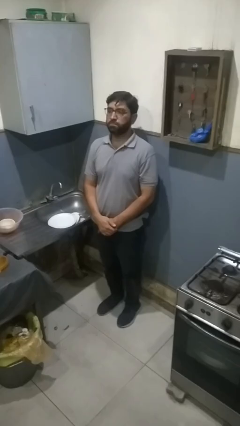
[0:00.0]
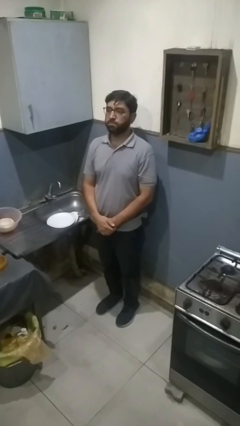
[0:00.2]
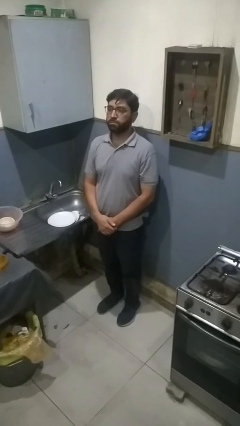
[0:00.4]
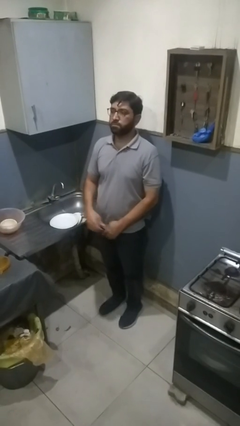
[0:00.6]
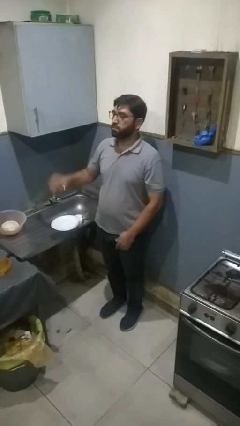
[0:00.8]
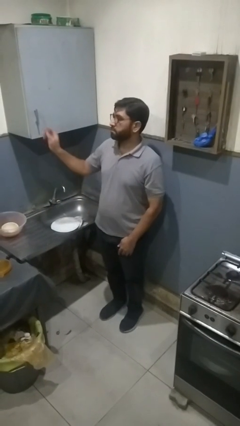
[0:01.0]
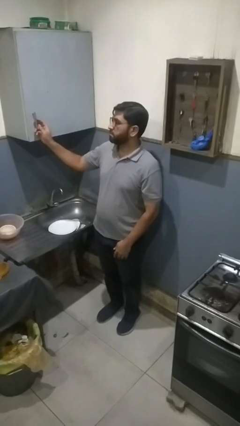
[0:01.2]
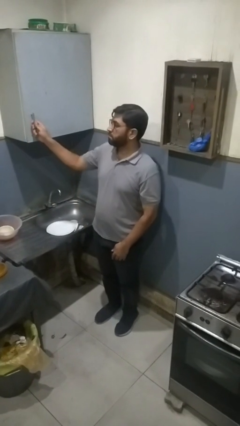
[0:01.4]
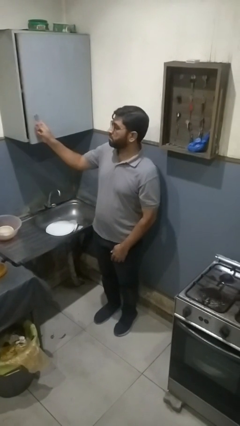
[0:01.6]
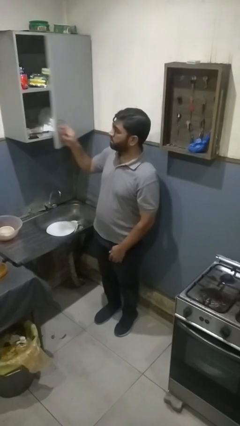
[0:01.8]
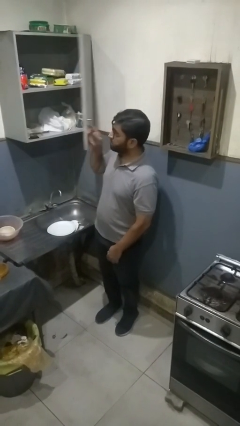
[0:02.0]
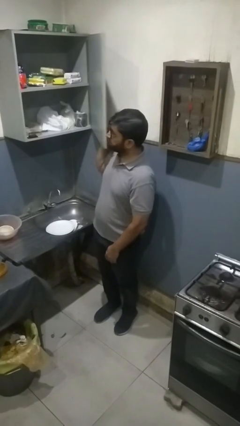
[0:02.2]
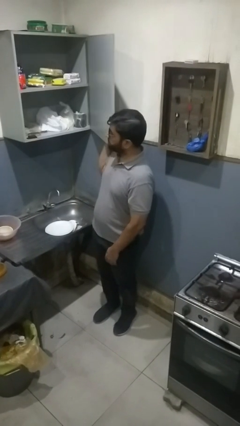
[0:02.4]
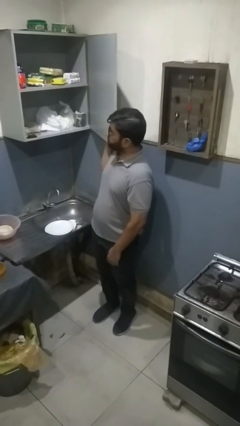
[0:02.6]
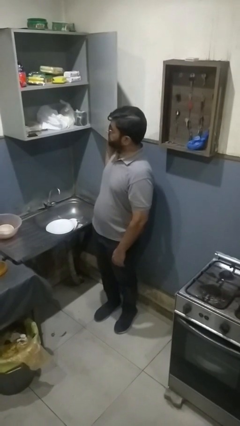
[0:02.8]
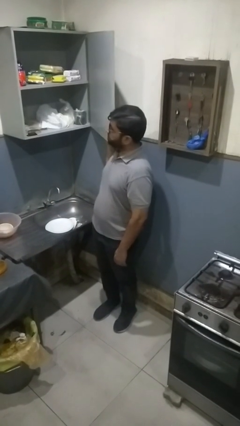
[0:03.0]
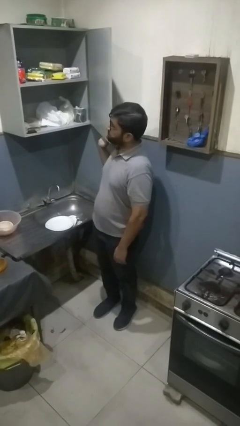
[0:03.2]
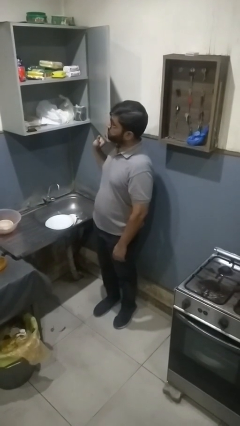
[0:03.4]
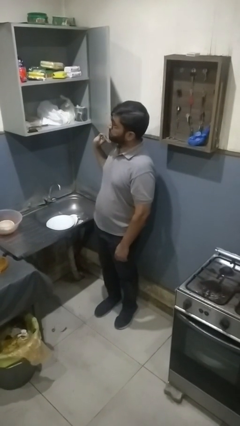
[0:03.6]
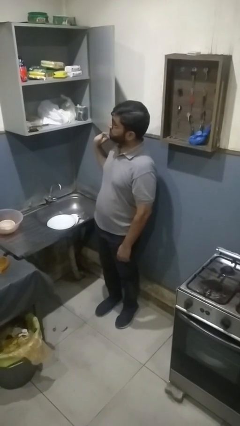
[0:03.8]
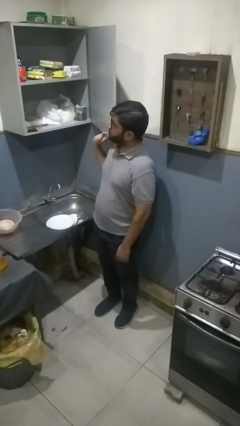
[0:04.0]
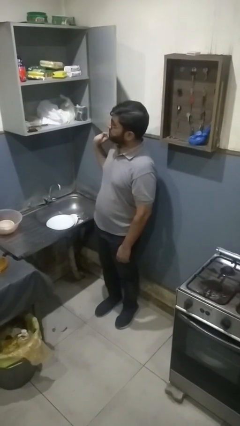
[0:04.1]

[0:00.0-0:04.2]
person opens cabinet

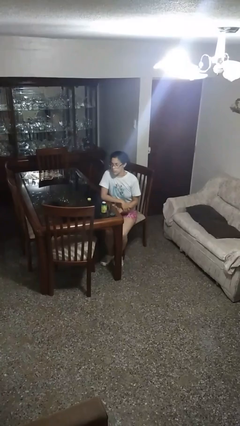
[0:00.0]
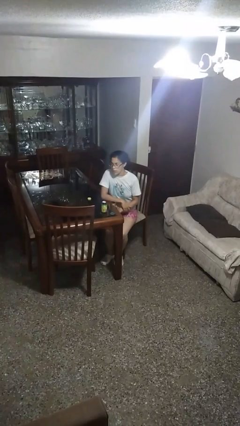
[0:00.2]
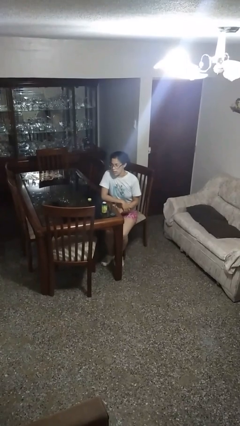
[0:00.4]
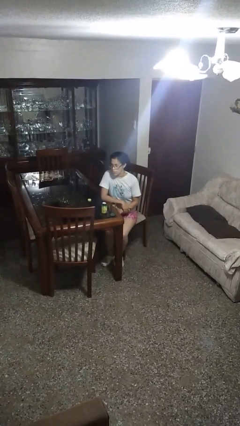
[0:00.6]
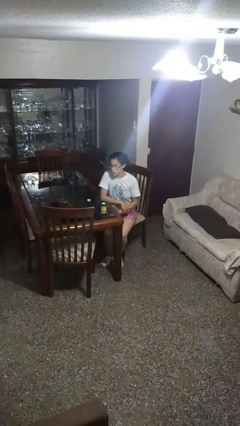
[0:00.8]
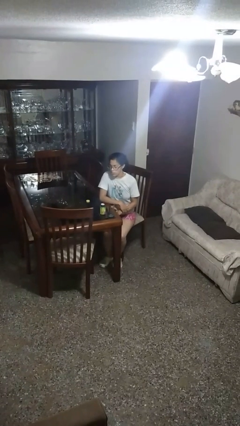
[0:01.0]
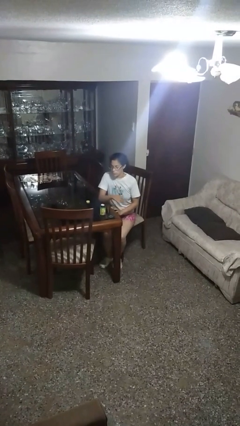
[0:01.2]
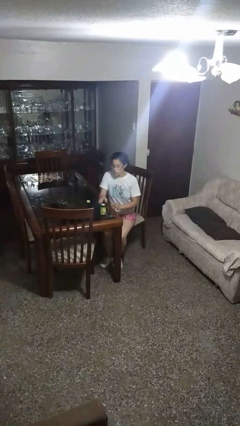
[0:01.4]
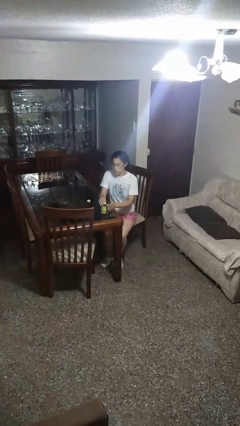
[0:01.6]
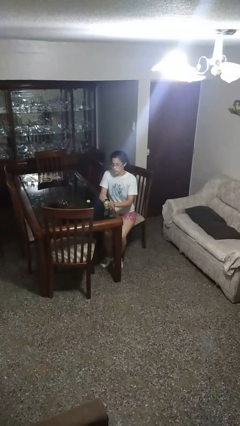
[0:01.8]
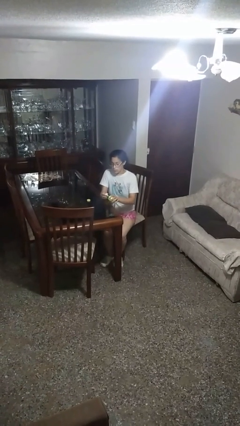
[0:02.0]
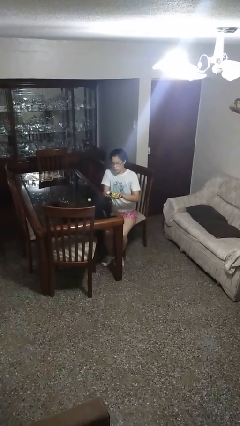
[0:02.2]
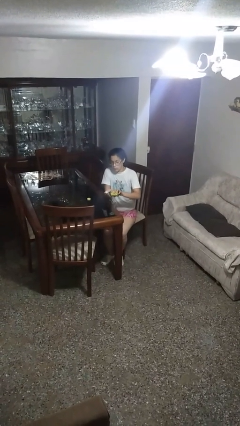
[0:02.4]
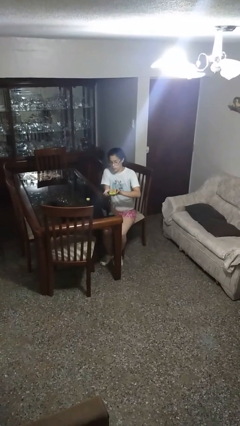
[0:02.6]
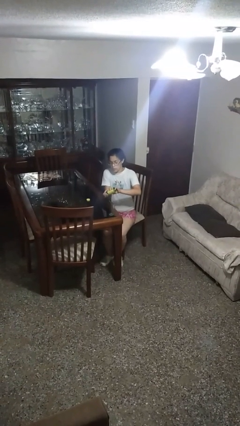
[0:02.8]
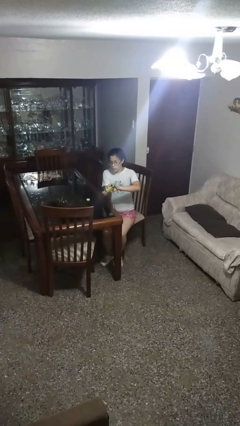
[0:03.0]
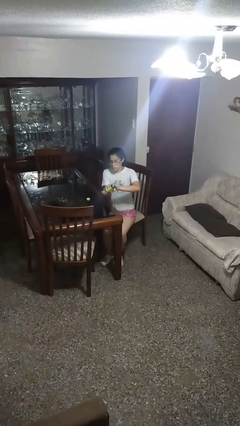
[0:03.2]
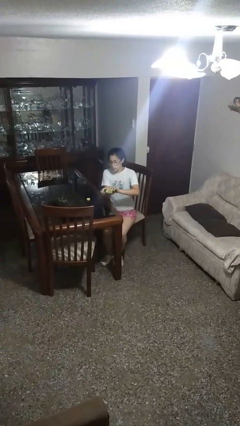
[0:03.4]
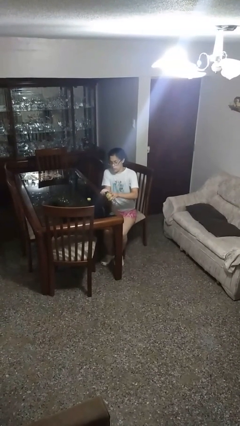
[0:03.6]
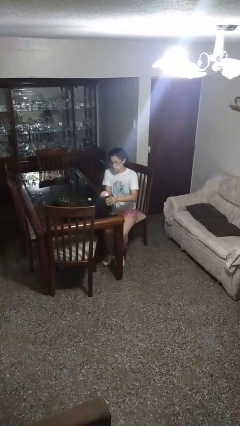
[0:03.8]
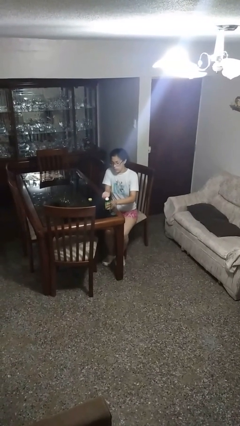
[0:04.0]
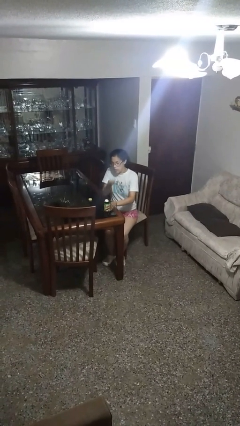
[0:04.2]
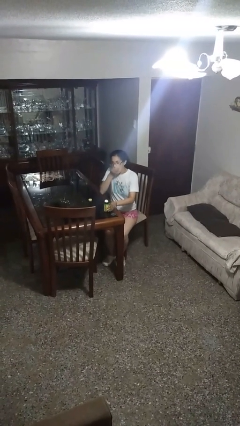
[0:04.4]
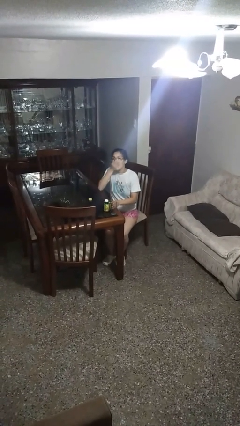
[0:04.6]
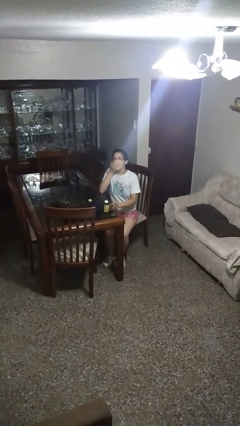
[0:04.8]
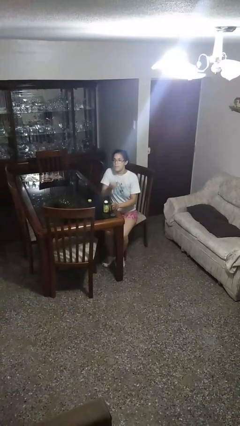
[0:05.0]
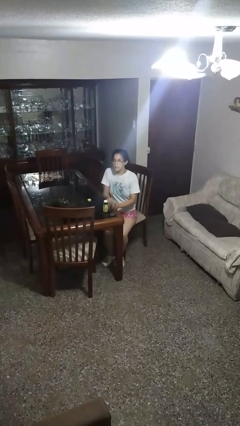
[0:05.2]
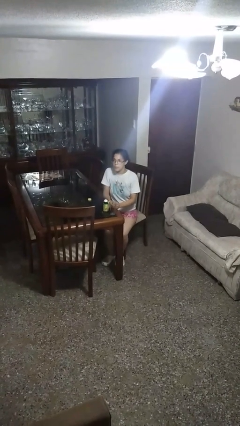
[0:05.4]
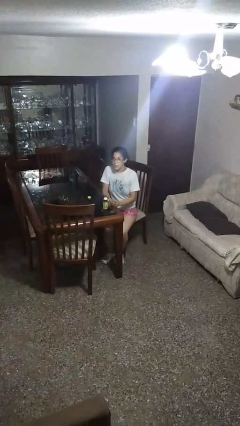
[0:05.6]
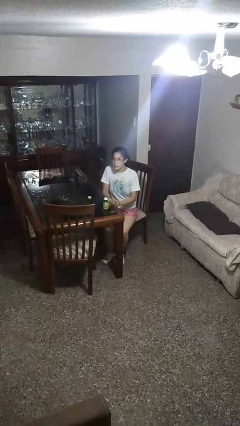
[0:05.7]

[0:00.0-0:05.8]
person takes medicine pills

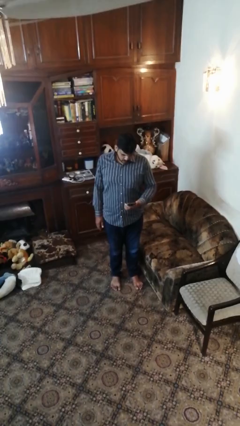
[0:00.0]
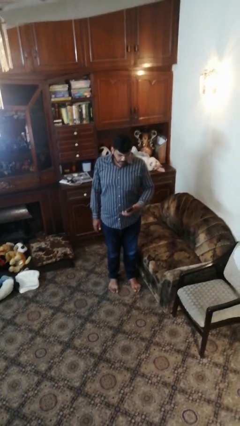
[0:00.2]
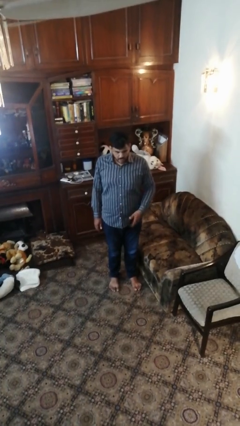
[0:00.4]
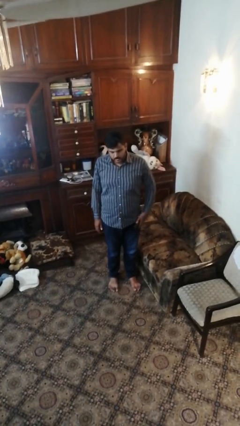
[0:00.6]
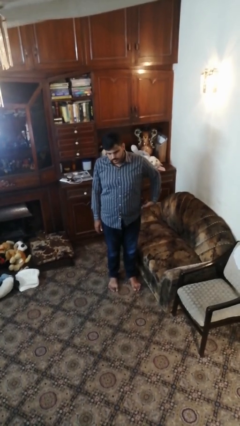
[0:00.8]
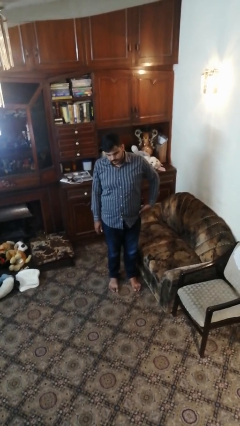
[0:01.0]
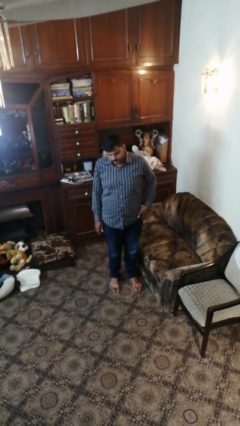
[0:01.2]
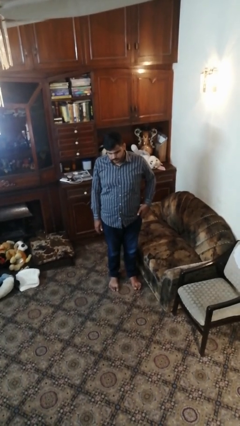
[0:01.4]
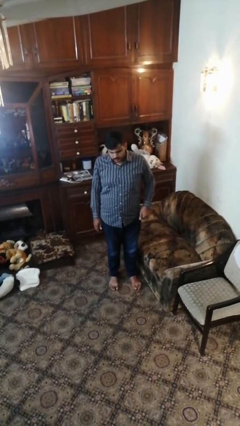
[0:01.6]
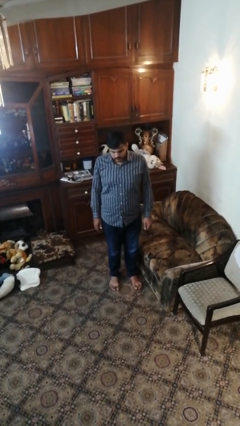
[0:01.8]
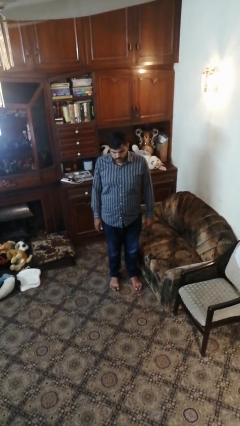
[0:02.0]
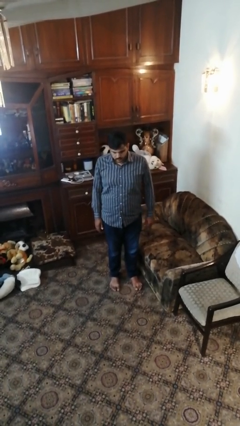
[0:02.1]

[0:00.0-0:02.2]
person puts phone into pocket

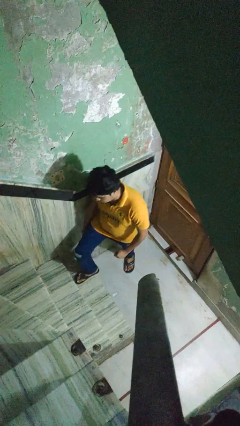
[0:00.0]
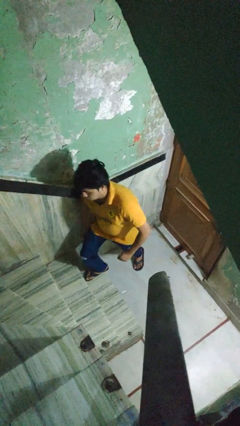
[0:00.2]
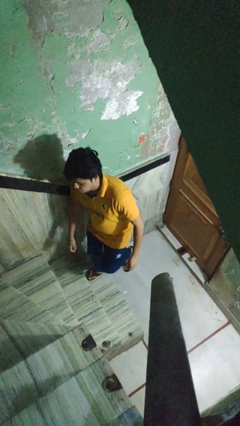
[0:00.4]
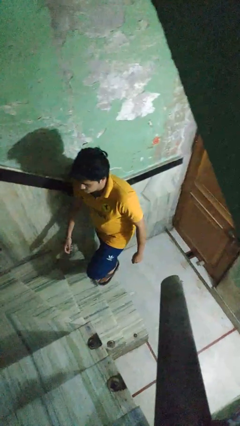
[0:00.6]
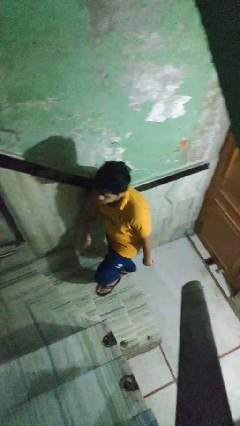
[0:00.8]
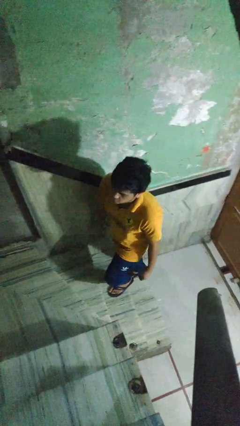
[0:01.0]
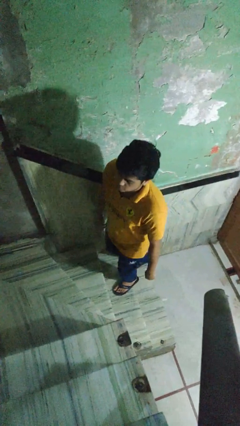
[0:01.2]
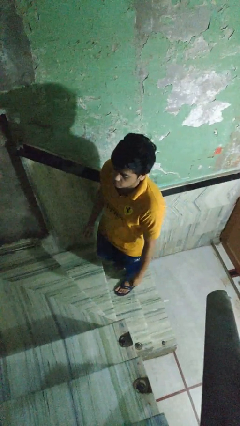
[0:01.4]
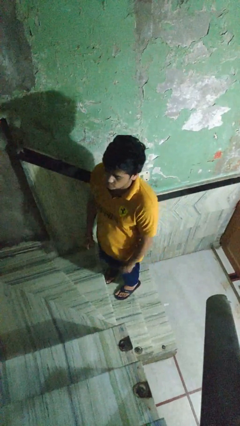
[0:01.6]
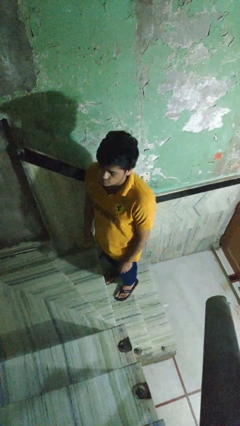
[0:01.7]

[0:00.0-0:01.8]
person climbs up stairs

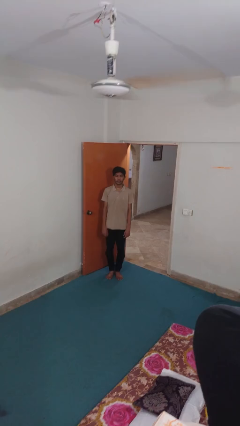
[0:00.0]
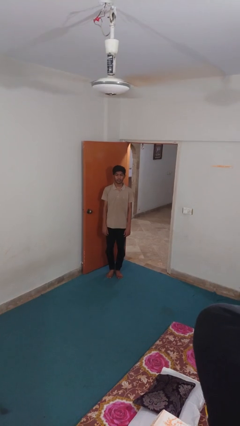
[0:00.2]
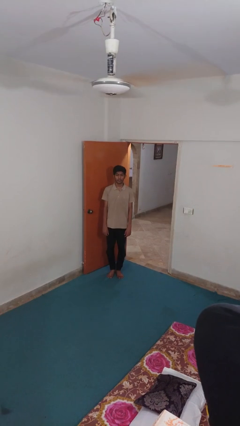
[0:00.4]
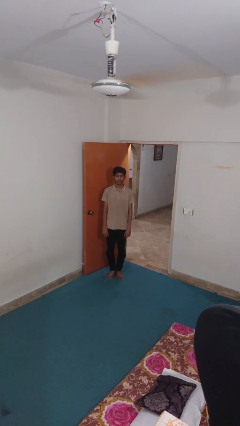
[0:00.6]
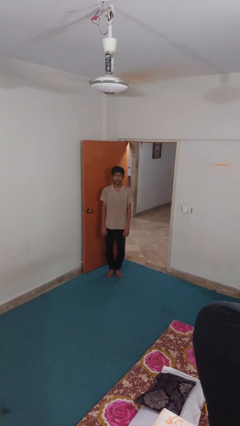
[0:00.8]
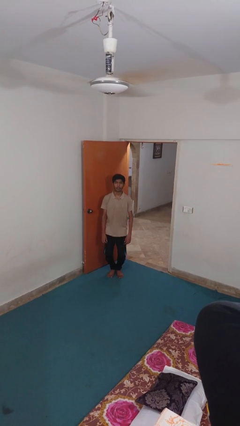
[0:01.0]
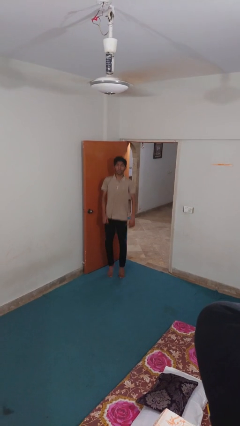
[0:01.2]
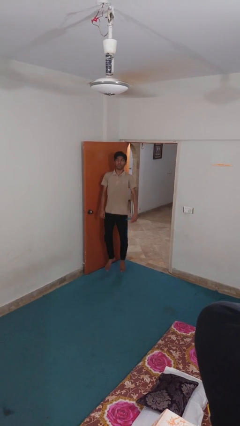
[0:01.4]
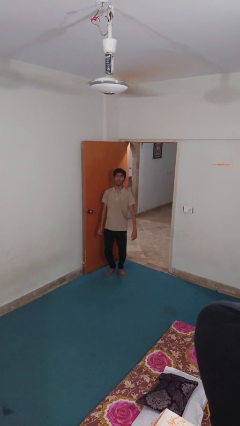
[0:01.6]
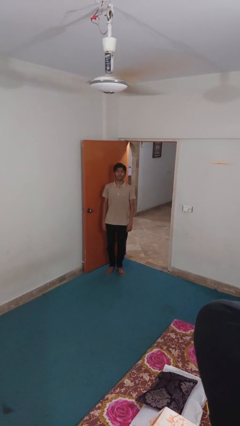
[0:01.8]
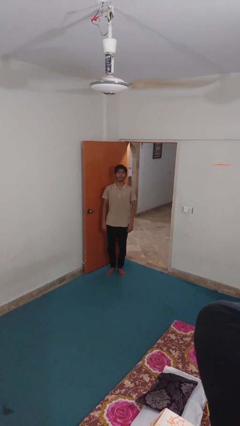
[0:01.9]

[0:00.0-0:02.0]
person jumps

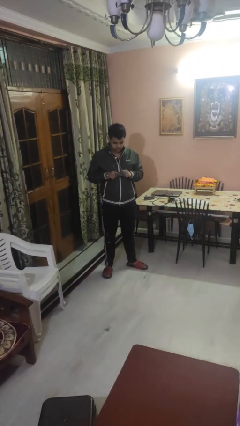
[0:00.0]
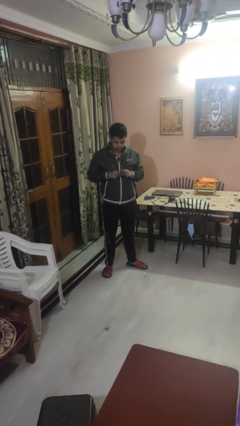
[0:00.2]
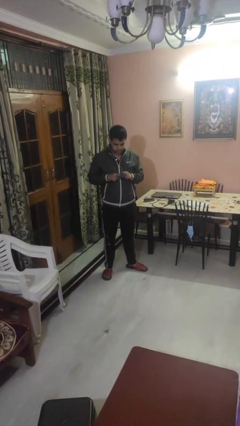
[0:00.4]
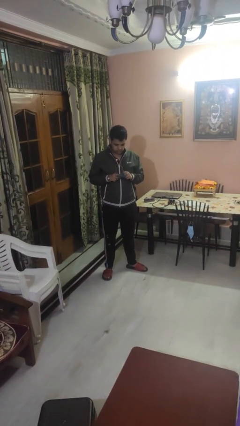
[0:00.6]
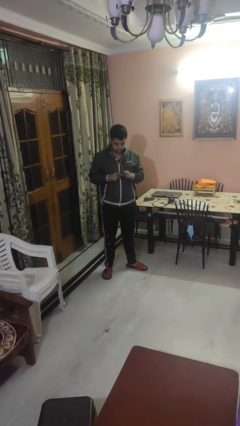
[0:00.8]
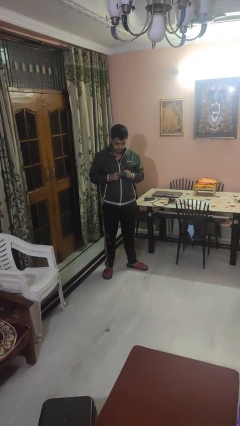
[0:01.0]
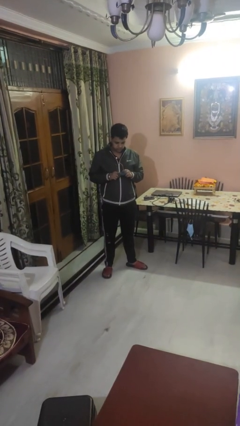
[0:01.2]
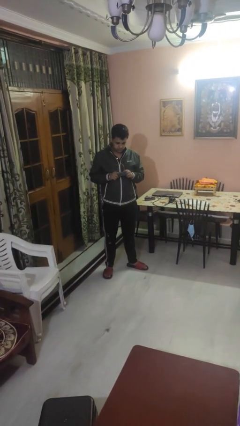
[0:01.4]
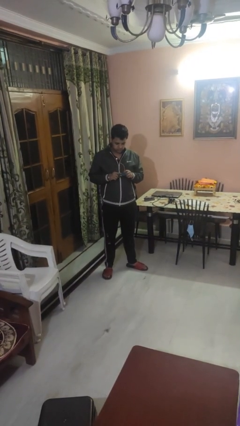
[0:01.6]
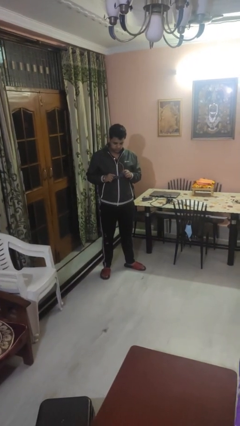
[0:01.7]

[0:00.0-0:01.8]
person cleans eyeglasses
